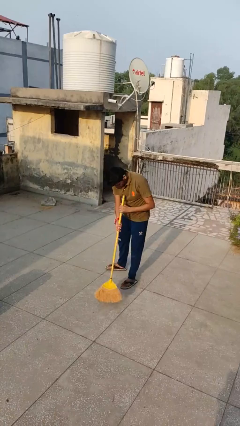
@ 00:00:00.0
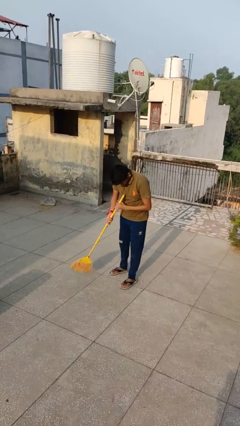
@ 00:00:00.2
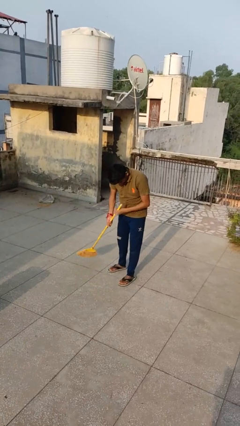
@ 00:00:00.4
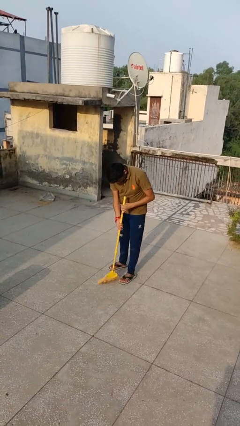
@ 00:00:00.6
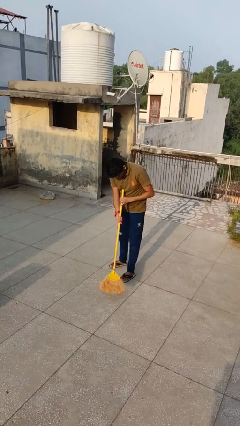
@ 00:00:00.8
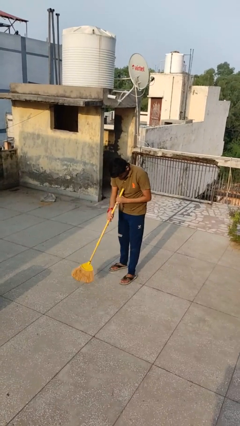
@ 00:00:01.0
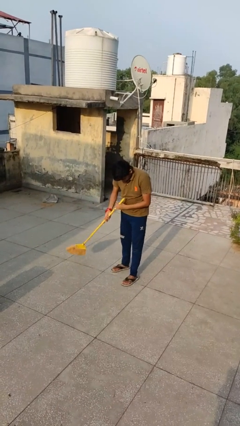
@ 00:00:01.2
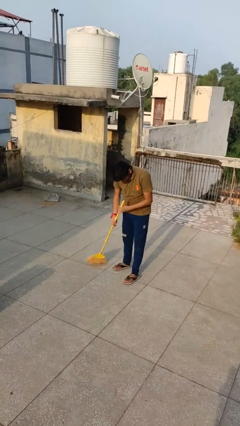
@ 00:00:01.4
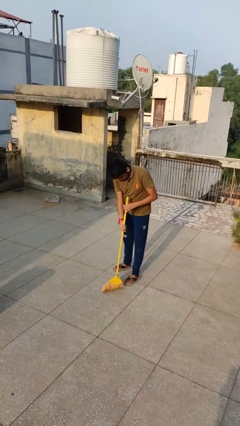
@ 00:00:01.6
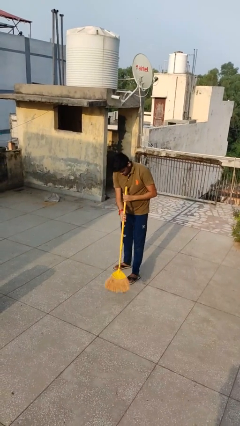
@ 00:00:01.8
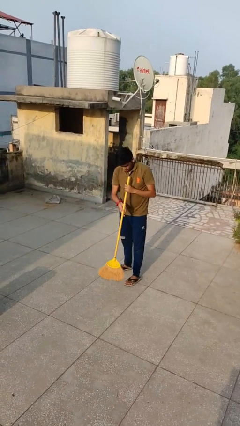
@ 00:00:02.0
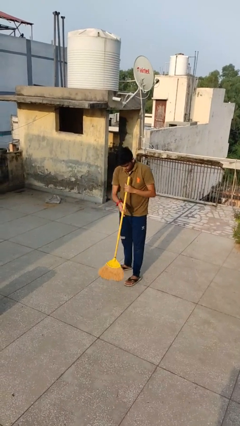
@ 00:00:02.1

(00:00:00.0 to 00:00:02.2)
person sweeps floor

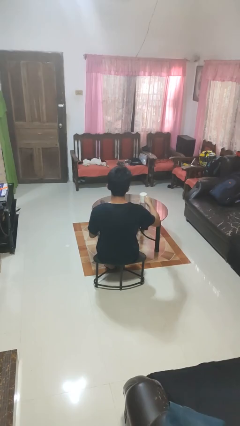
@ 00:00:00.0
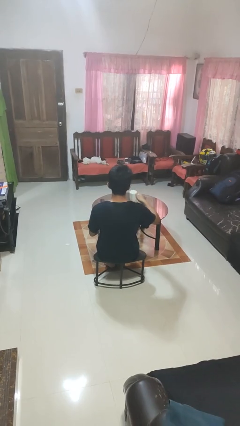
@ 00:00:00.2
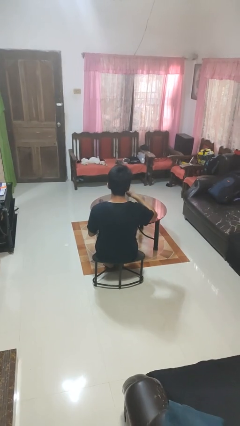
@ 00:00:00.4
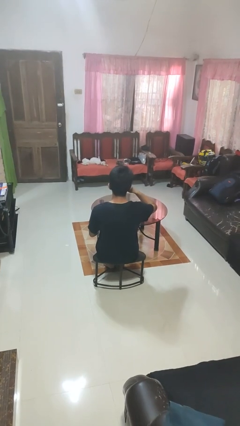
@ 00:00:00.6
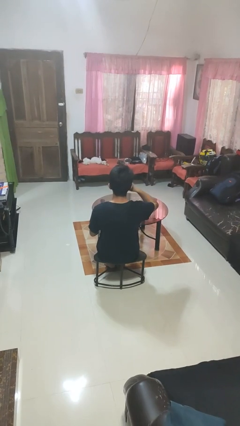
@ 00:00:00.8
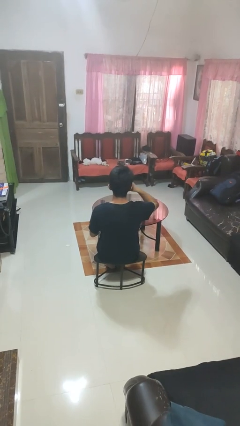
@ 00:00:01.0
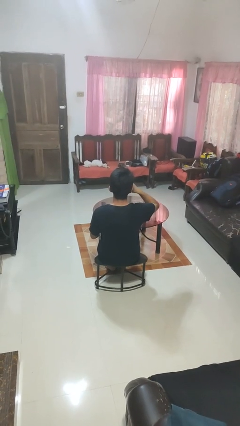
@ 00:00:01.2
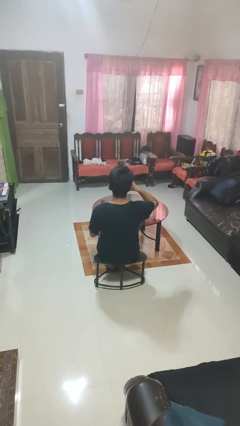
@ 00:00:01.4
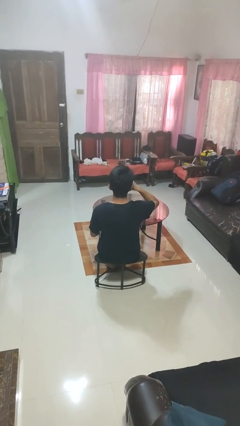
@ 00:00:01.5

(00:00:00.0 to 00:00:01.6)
person drinks from mug

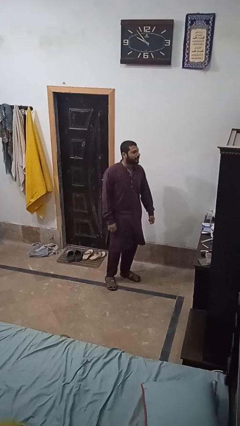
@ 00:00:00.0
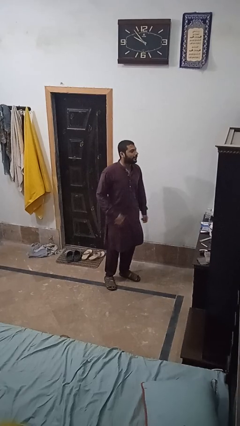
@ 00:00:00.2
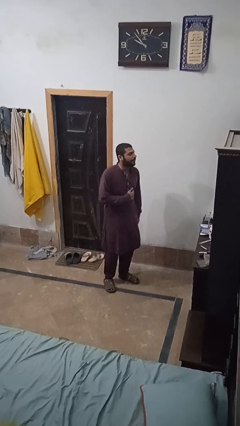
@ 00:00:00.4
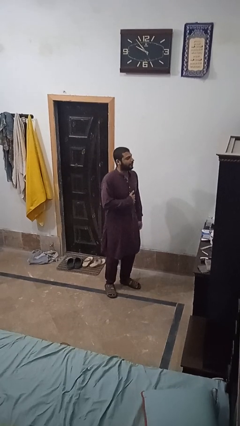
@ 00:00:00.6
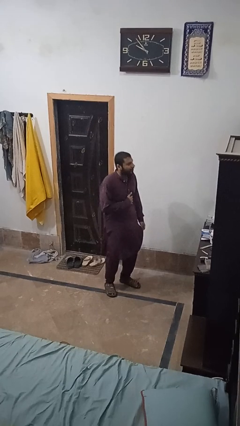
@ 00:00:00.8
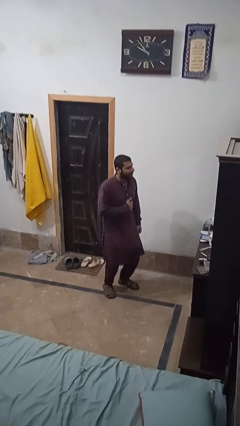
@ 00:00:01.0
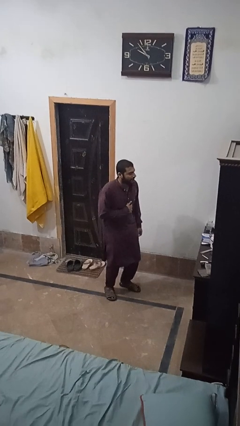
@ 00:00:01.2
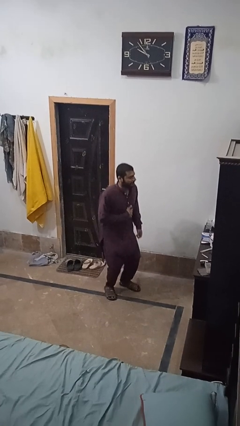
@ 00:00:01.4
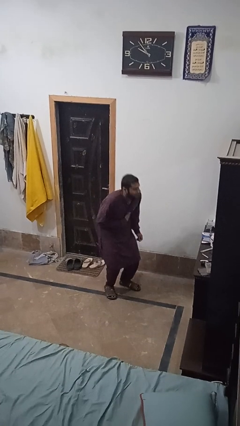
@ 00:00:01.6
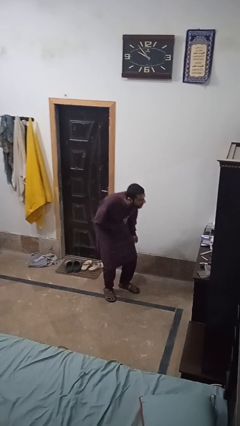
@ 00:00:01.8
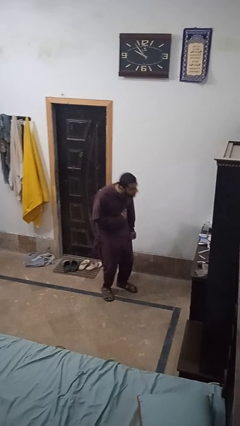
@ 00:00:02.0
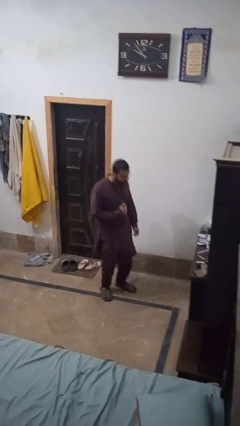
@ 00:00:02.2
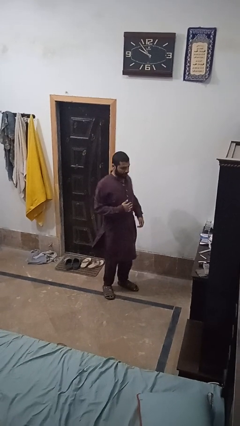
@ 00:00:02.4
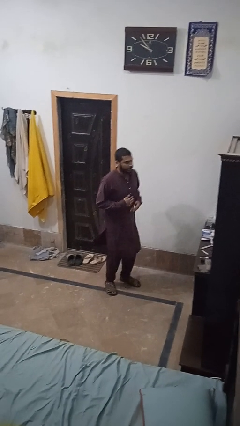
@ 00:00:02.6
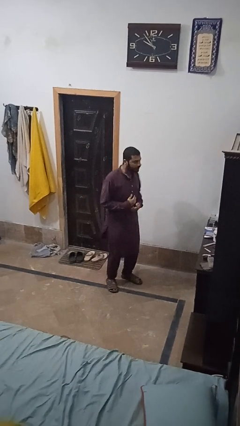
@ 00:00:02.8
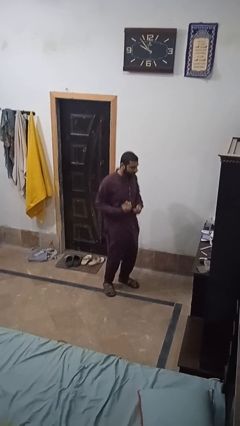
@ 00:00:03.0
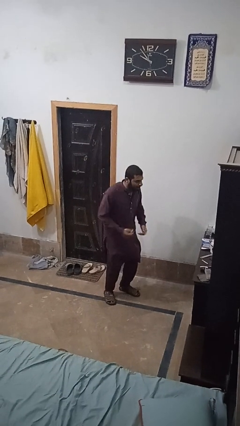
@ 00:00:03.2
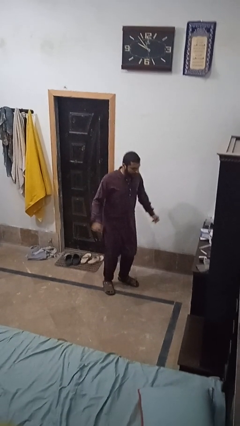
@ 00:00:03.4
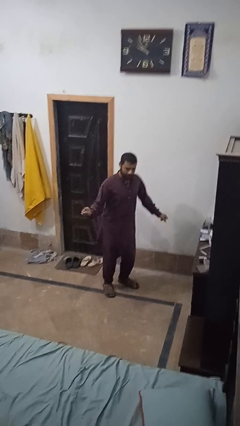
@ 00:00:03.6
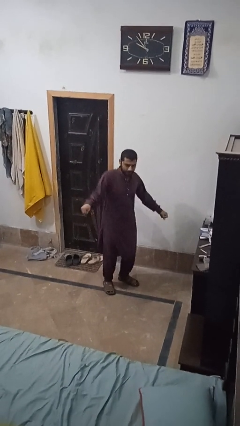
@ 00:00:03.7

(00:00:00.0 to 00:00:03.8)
person dances in place

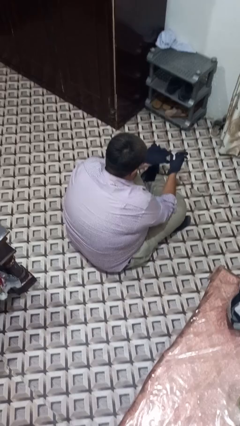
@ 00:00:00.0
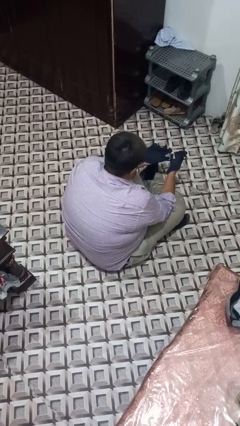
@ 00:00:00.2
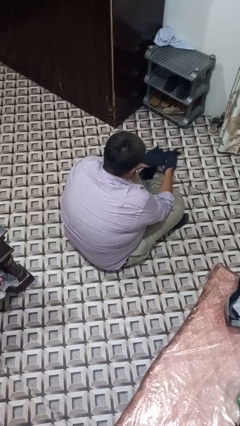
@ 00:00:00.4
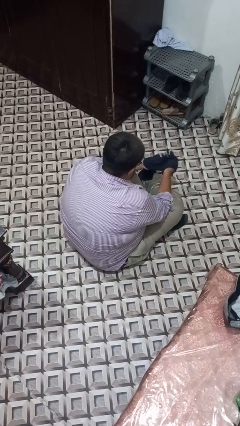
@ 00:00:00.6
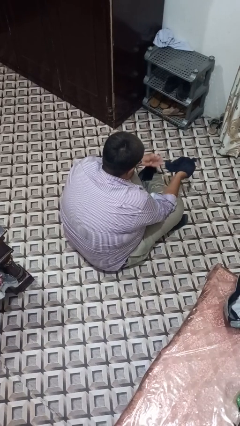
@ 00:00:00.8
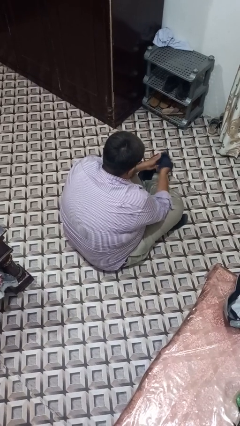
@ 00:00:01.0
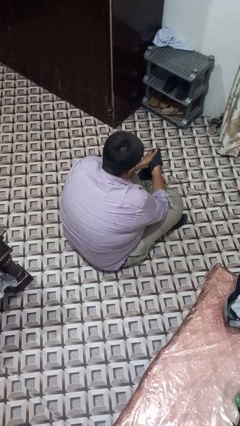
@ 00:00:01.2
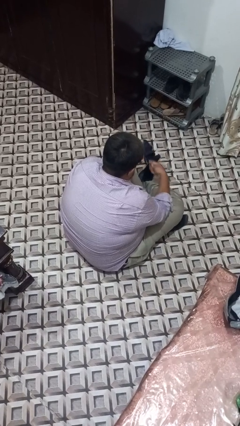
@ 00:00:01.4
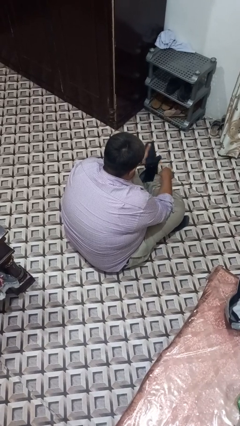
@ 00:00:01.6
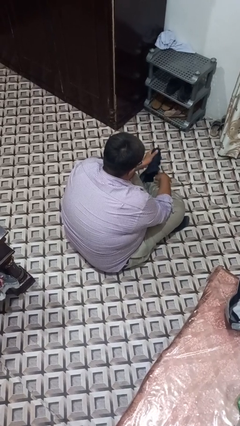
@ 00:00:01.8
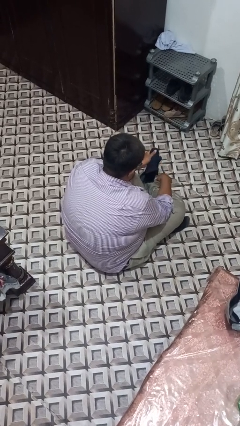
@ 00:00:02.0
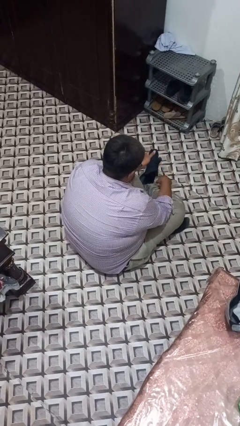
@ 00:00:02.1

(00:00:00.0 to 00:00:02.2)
person takes off gloves

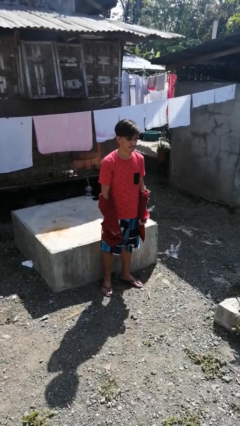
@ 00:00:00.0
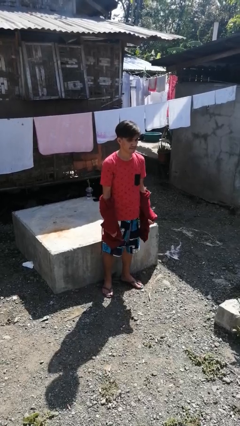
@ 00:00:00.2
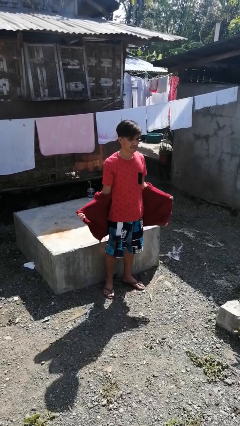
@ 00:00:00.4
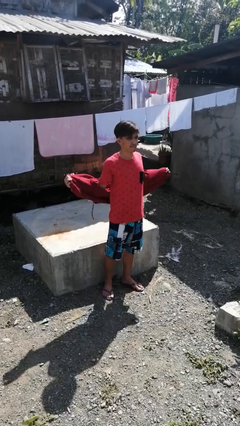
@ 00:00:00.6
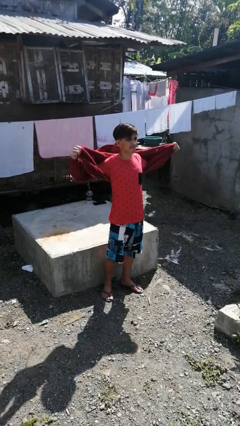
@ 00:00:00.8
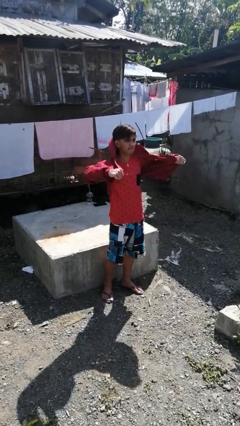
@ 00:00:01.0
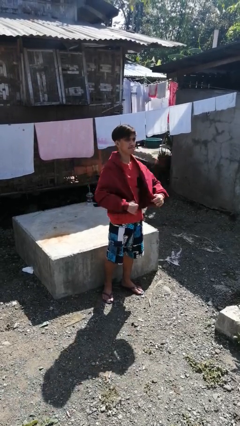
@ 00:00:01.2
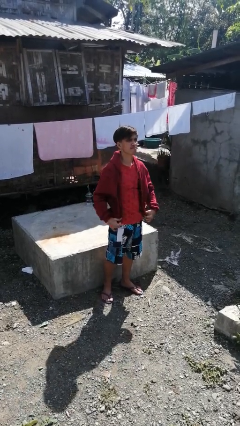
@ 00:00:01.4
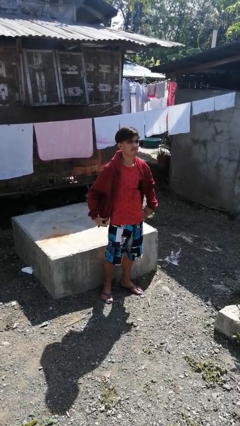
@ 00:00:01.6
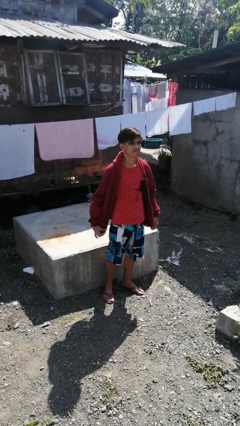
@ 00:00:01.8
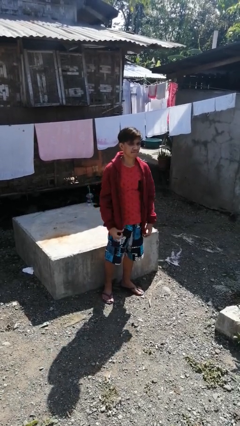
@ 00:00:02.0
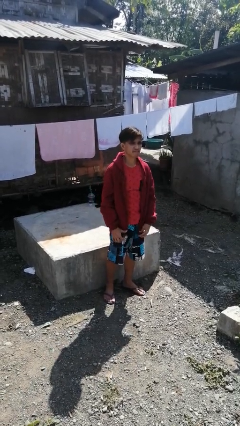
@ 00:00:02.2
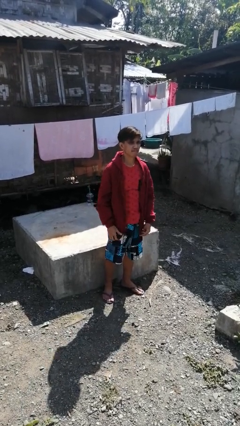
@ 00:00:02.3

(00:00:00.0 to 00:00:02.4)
person puts on jacket

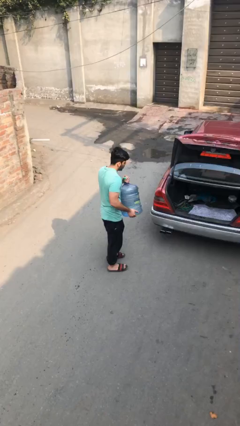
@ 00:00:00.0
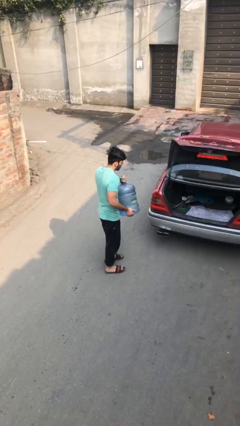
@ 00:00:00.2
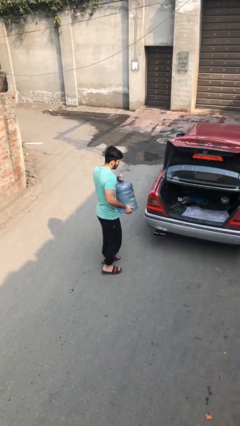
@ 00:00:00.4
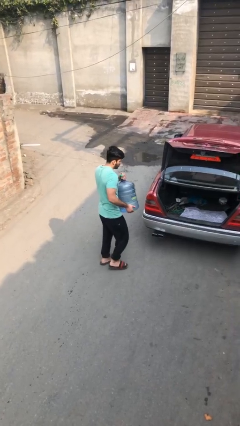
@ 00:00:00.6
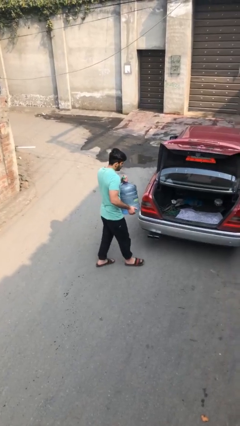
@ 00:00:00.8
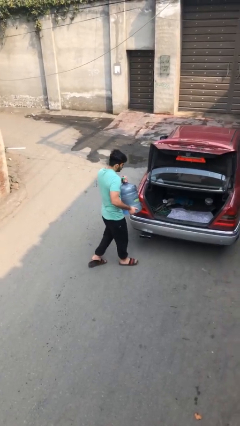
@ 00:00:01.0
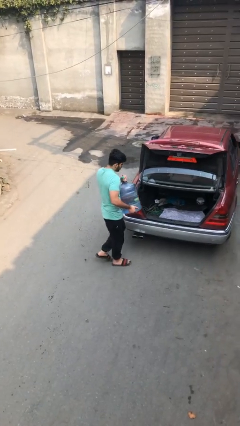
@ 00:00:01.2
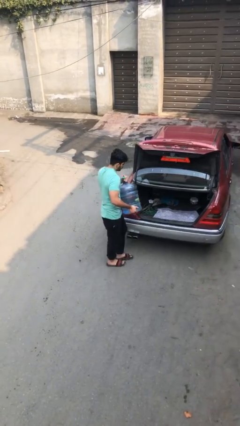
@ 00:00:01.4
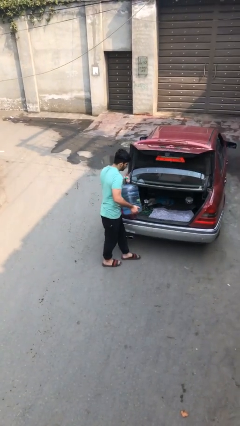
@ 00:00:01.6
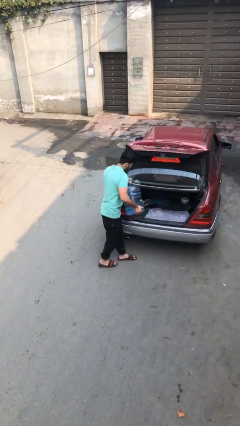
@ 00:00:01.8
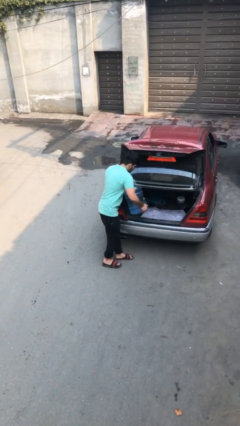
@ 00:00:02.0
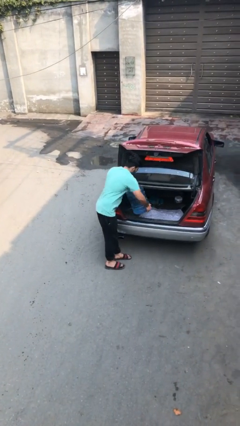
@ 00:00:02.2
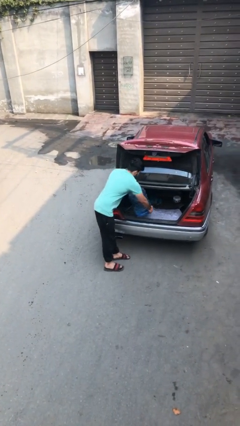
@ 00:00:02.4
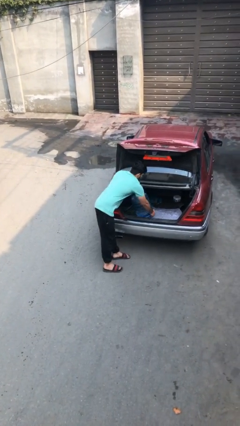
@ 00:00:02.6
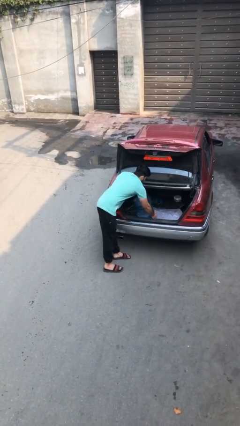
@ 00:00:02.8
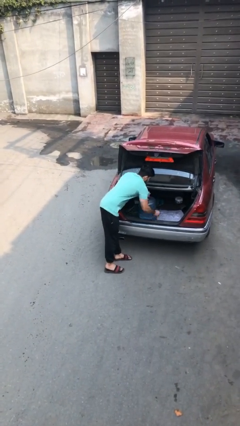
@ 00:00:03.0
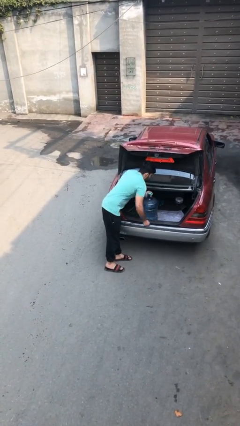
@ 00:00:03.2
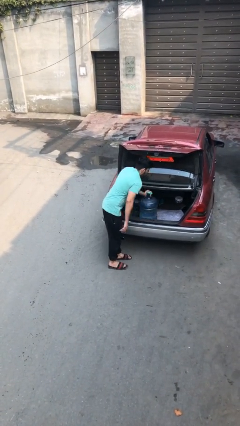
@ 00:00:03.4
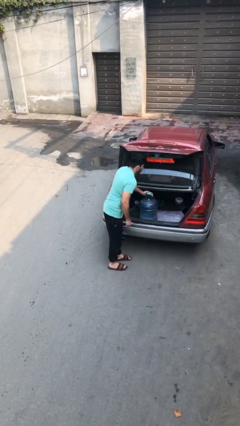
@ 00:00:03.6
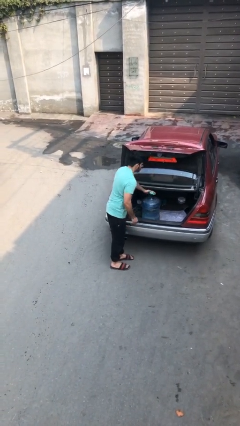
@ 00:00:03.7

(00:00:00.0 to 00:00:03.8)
person loads car

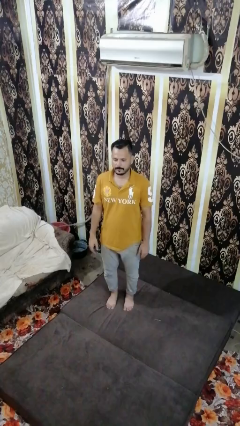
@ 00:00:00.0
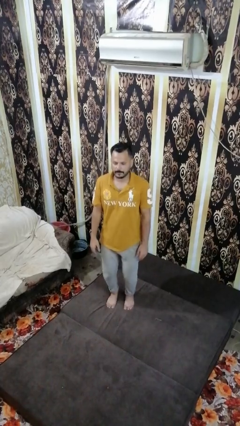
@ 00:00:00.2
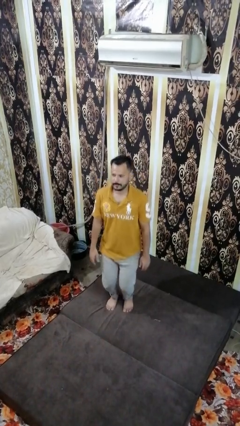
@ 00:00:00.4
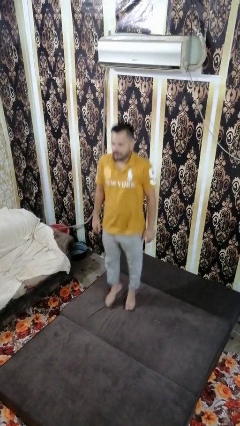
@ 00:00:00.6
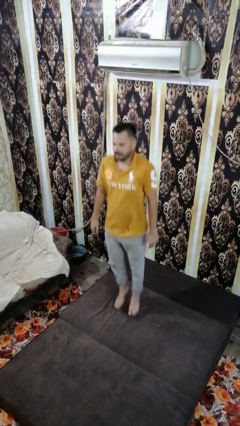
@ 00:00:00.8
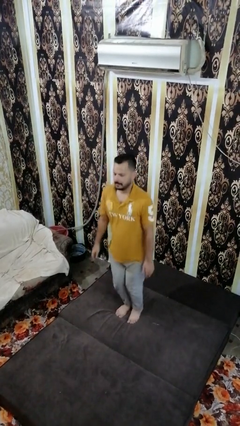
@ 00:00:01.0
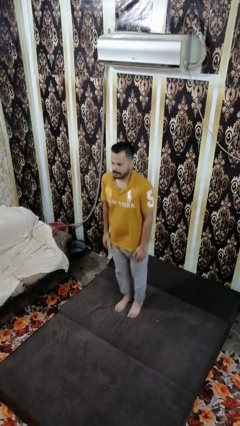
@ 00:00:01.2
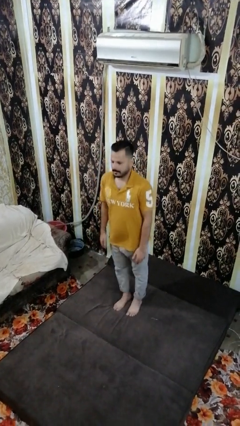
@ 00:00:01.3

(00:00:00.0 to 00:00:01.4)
person jumps on bed
